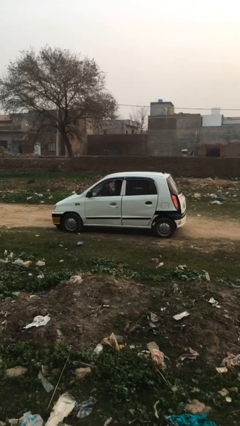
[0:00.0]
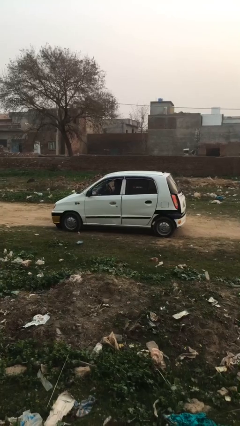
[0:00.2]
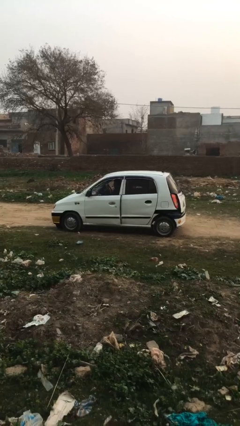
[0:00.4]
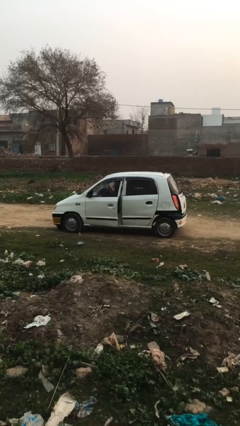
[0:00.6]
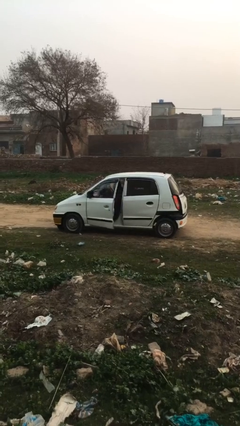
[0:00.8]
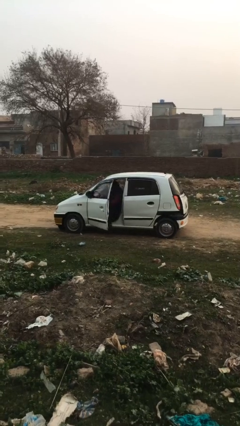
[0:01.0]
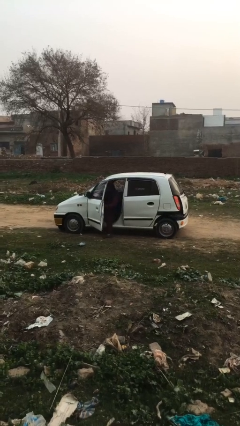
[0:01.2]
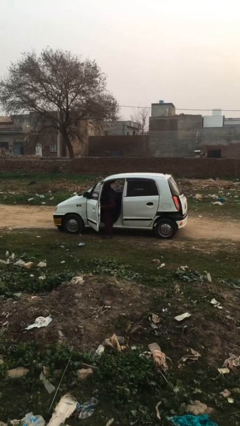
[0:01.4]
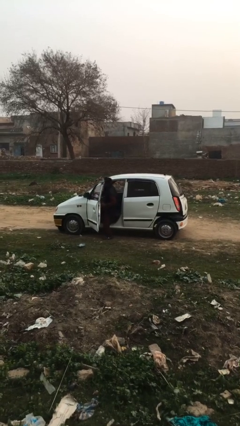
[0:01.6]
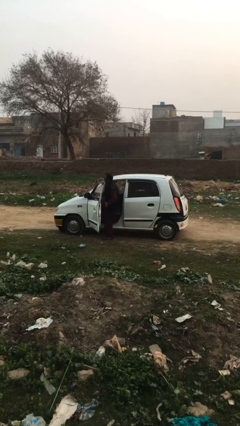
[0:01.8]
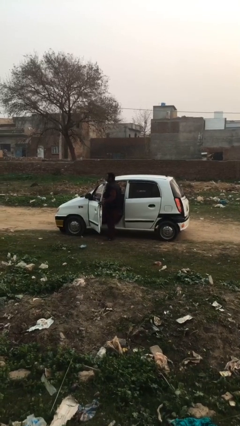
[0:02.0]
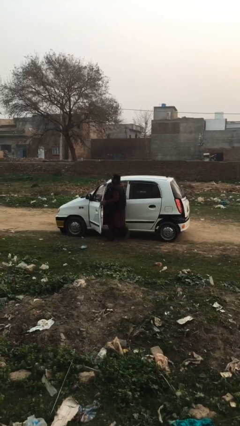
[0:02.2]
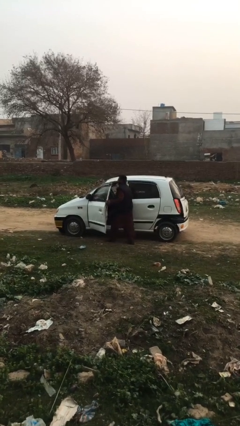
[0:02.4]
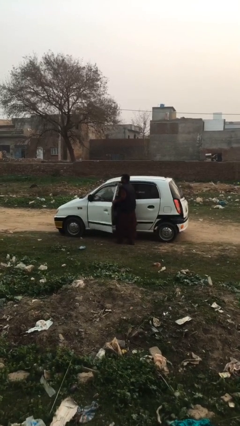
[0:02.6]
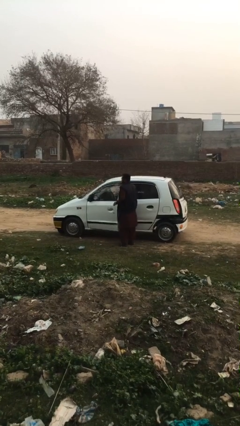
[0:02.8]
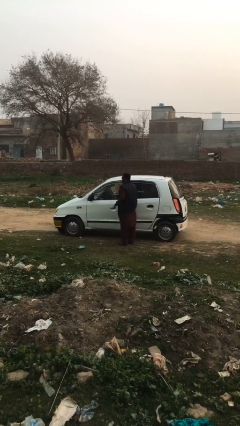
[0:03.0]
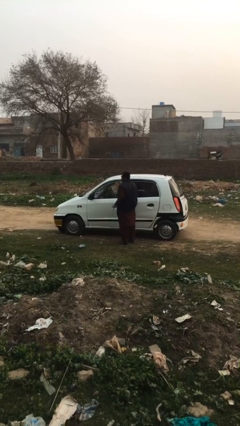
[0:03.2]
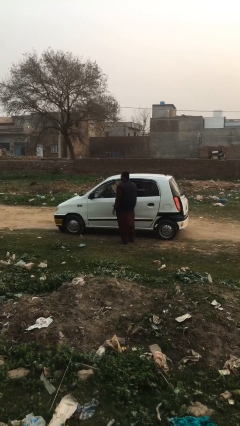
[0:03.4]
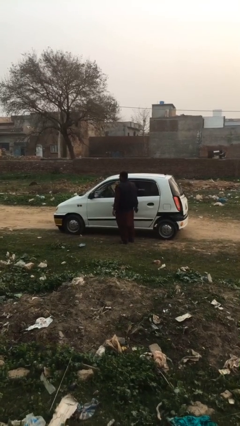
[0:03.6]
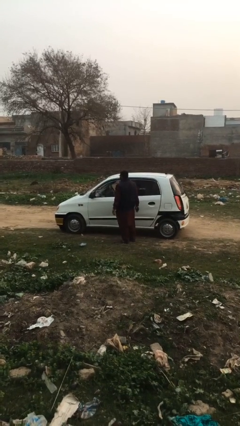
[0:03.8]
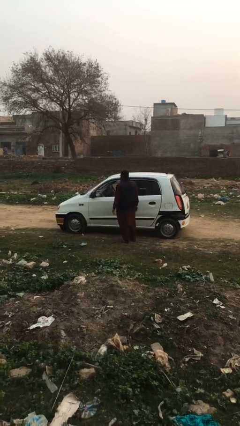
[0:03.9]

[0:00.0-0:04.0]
car drops off person

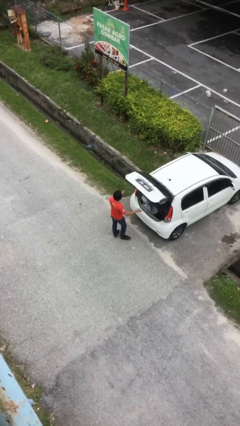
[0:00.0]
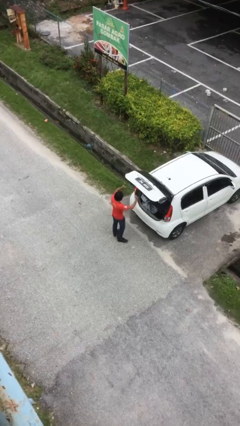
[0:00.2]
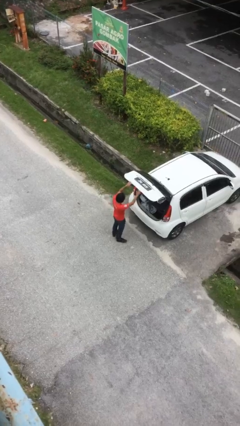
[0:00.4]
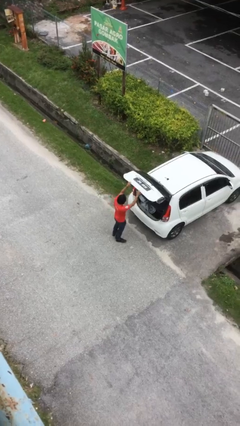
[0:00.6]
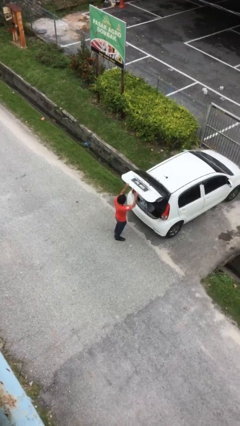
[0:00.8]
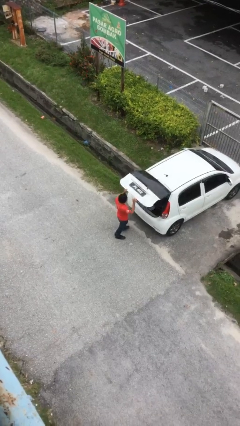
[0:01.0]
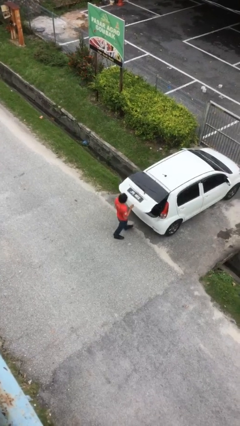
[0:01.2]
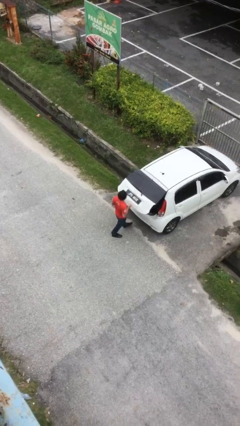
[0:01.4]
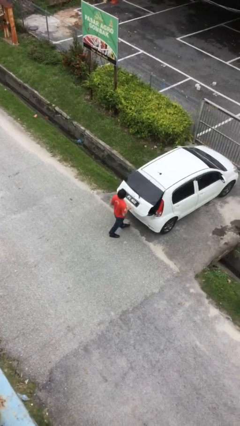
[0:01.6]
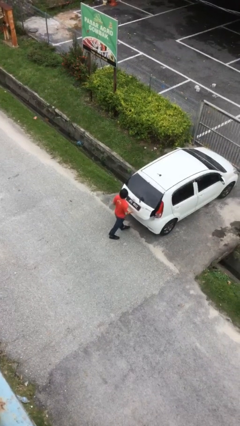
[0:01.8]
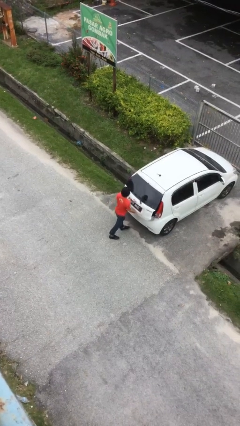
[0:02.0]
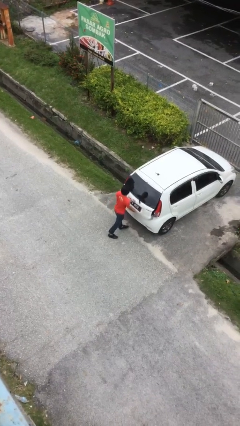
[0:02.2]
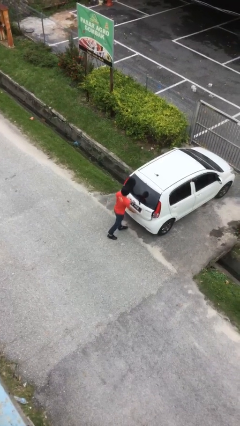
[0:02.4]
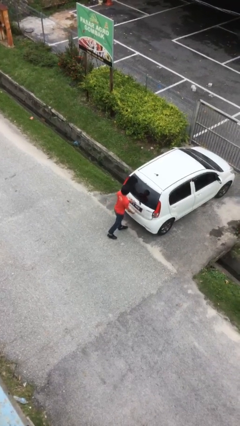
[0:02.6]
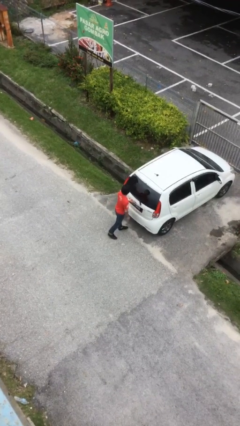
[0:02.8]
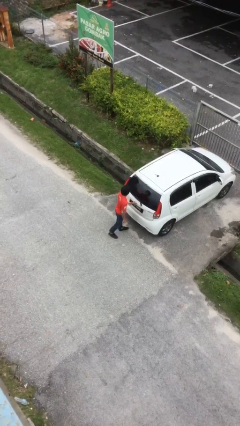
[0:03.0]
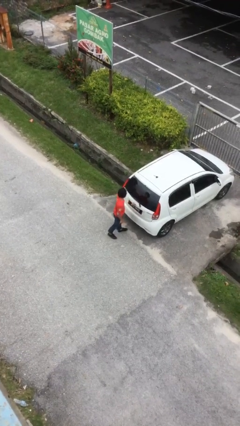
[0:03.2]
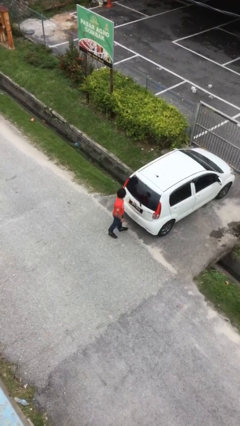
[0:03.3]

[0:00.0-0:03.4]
person closes car trunk

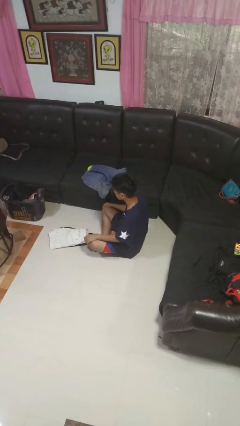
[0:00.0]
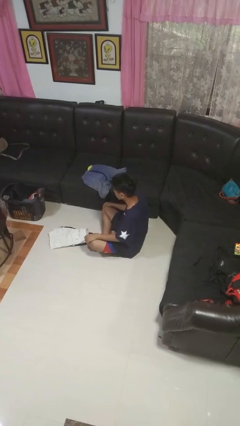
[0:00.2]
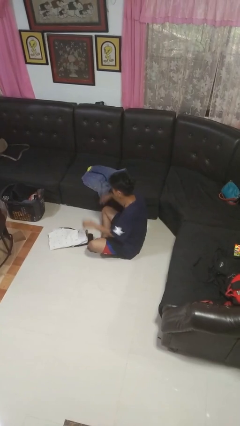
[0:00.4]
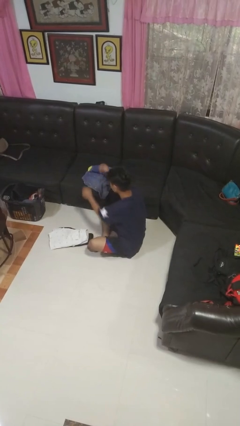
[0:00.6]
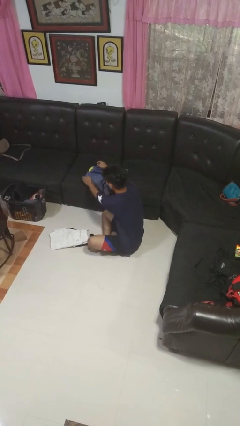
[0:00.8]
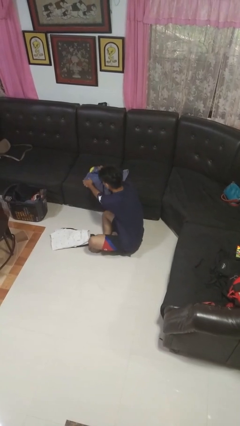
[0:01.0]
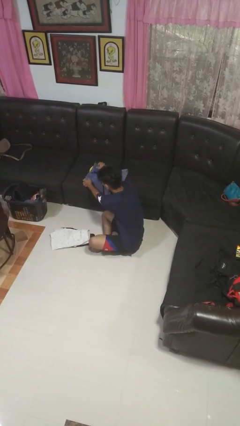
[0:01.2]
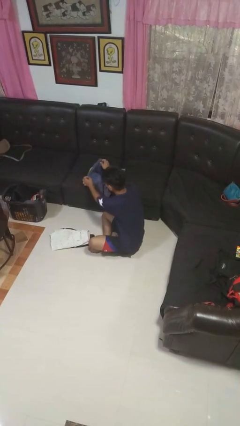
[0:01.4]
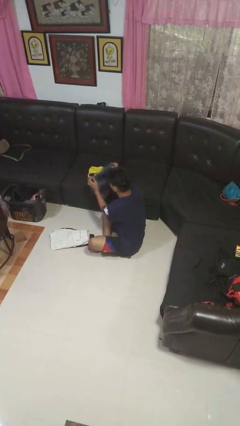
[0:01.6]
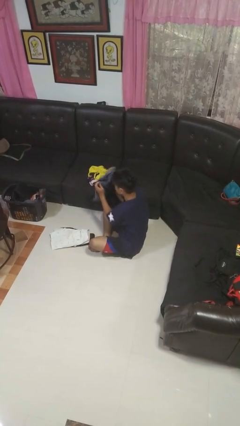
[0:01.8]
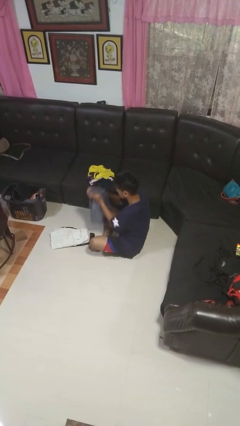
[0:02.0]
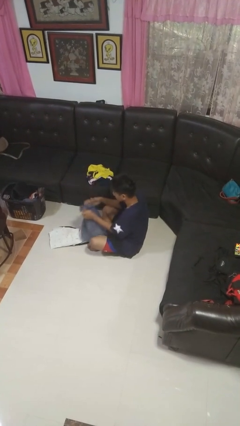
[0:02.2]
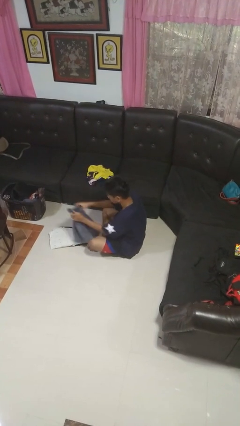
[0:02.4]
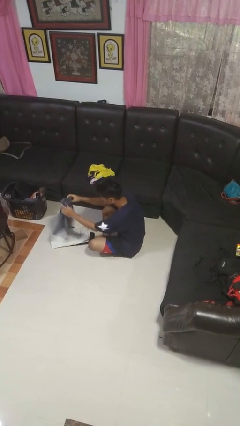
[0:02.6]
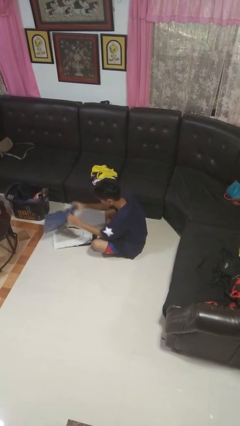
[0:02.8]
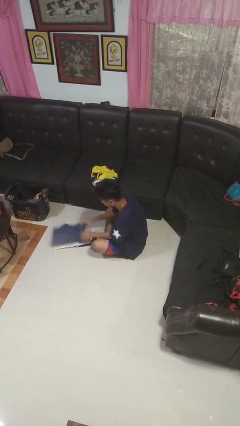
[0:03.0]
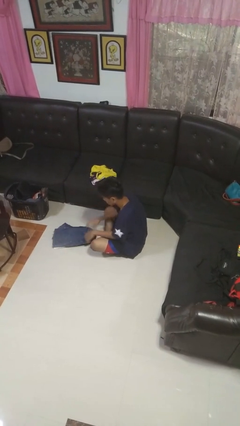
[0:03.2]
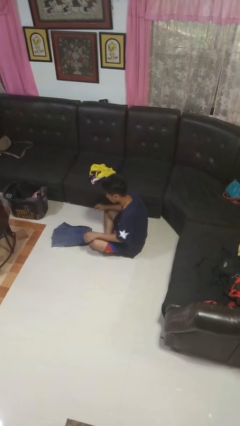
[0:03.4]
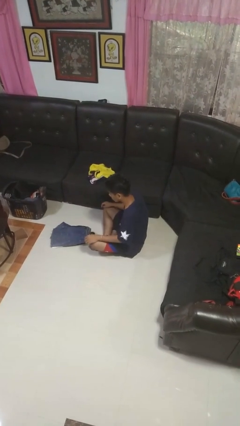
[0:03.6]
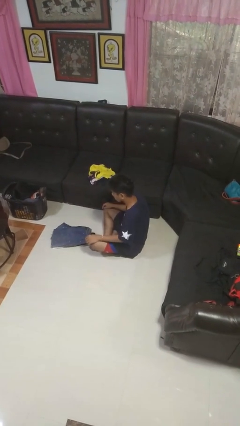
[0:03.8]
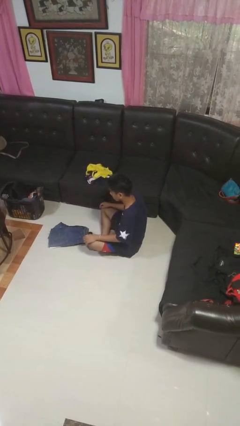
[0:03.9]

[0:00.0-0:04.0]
person folds pants

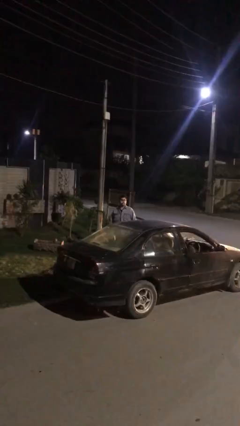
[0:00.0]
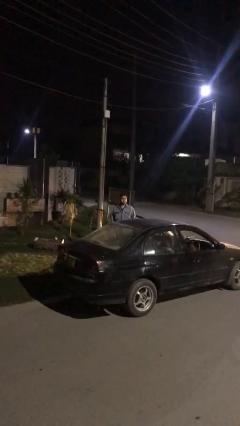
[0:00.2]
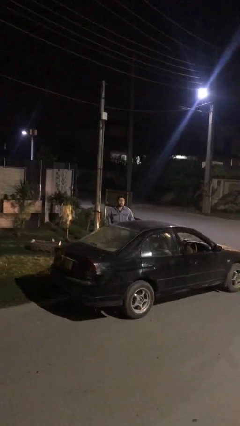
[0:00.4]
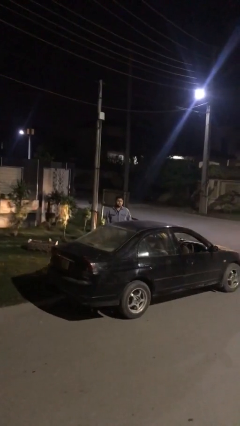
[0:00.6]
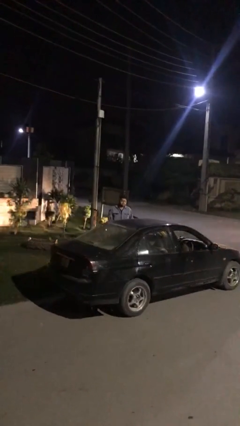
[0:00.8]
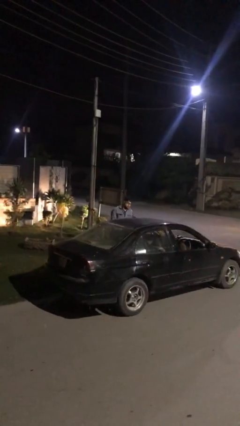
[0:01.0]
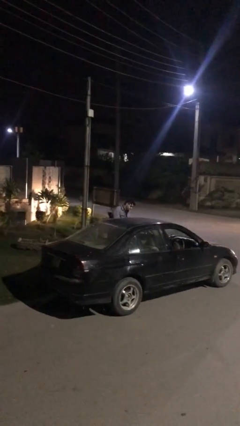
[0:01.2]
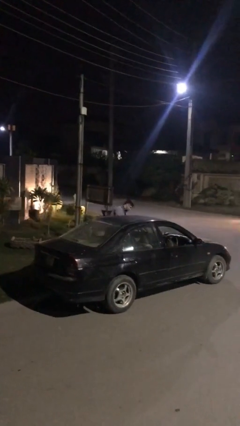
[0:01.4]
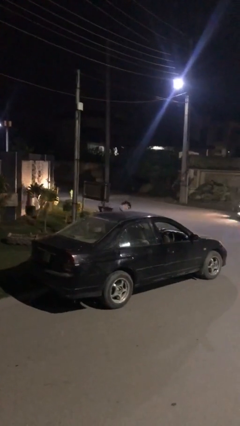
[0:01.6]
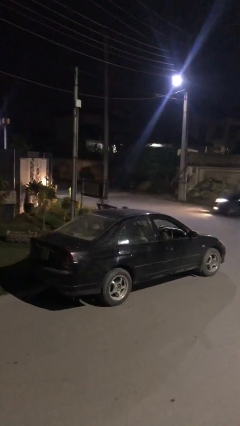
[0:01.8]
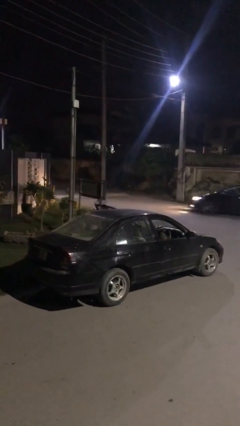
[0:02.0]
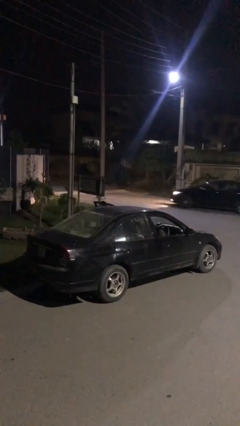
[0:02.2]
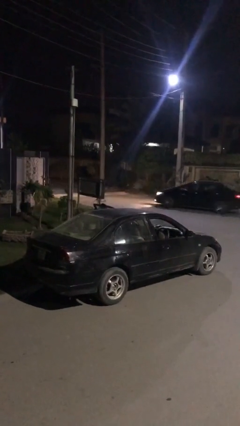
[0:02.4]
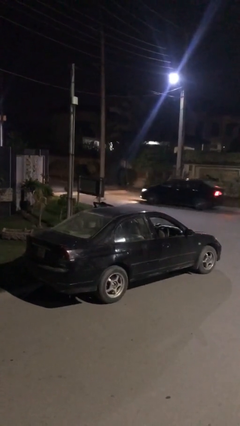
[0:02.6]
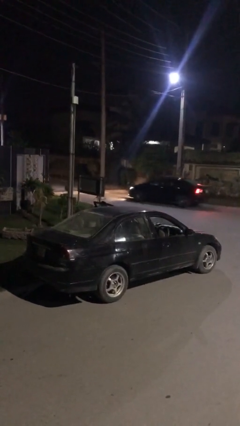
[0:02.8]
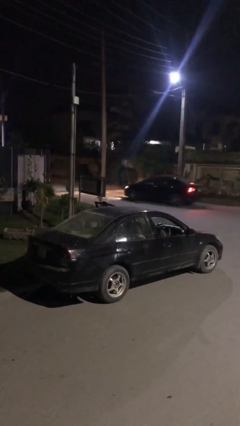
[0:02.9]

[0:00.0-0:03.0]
person enters car

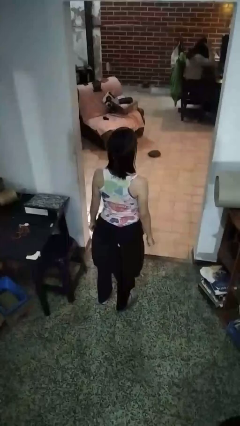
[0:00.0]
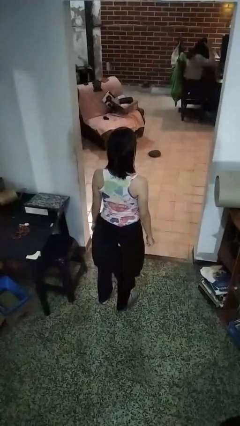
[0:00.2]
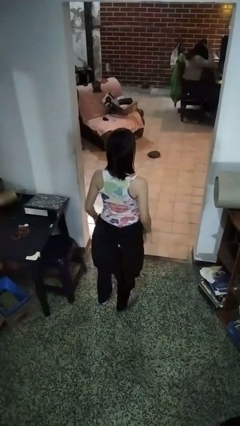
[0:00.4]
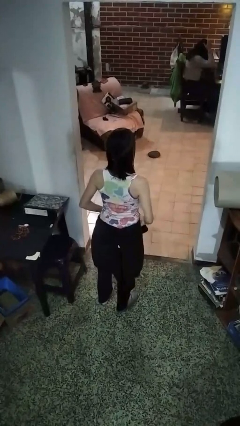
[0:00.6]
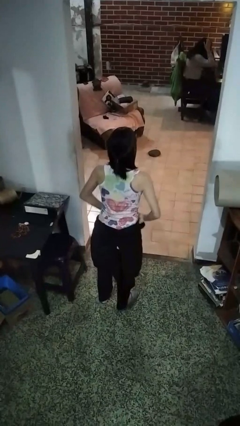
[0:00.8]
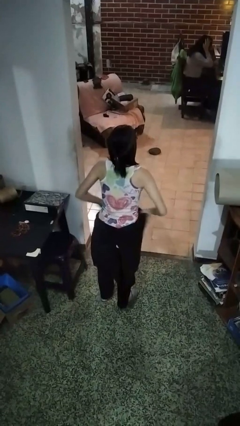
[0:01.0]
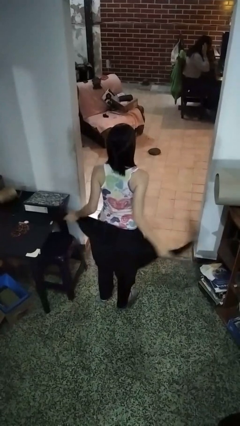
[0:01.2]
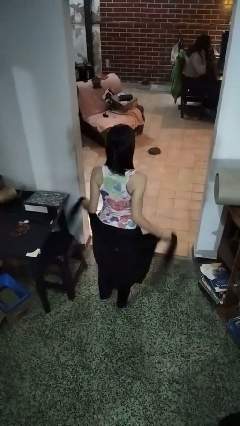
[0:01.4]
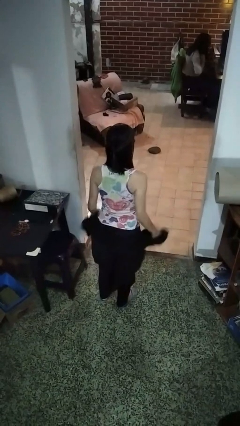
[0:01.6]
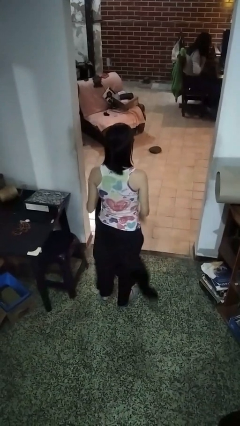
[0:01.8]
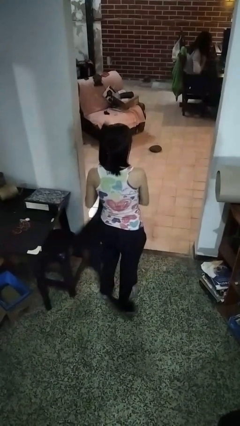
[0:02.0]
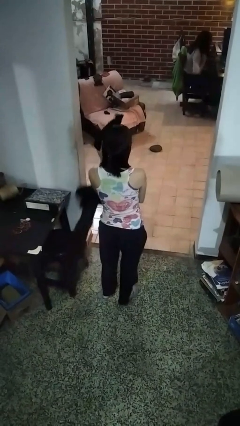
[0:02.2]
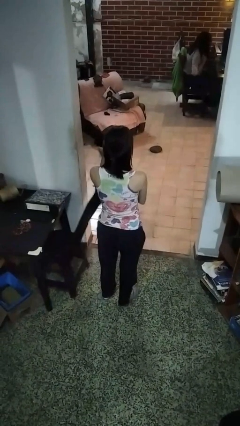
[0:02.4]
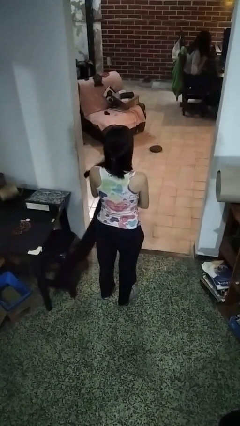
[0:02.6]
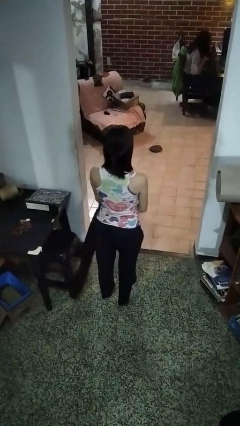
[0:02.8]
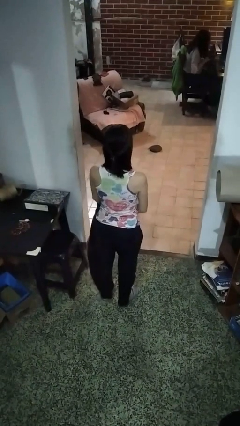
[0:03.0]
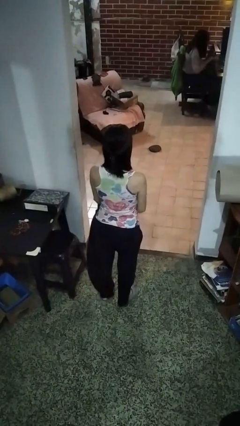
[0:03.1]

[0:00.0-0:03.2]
person unties jacket around waist

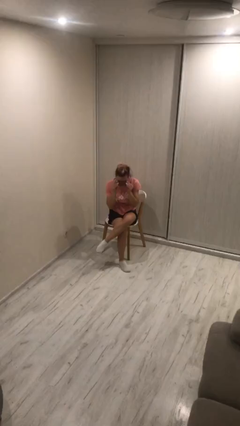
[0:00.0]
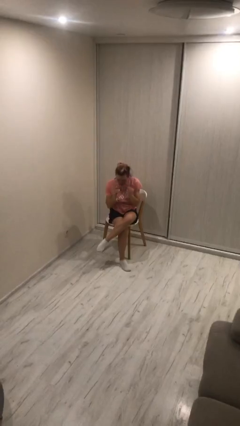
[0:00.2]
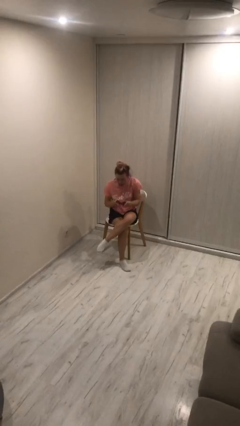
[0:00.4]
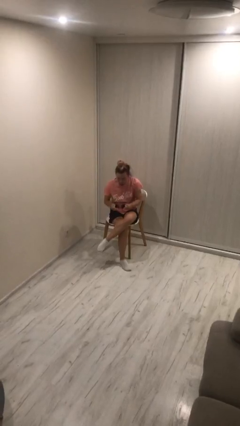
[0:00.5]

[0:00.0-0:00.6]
person takes off sunglasses
